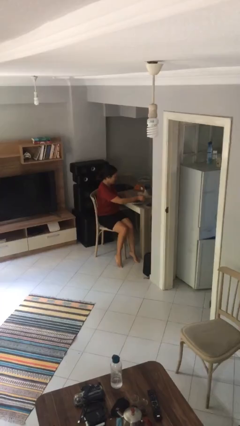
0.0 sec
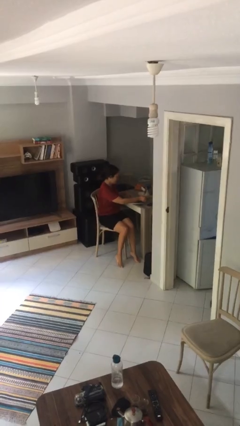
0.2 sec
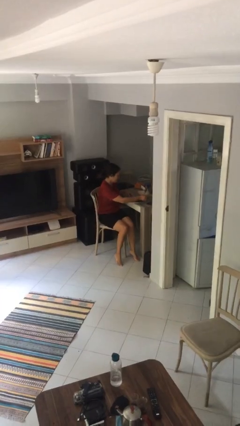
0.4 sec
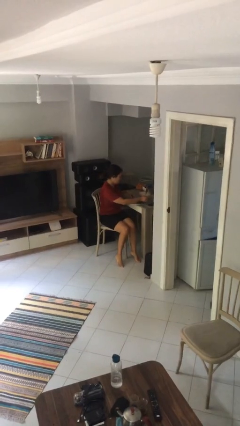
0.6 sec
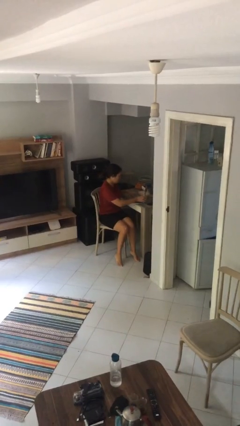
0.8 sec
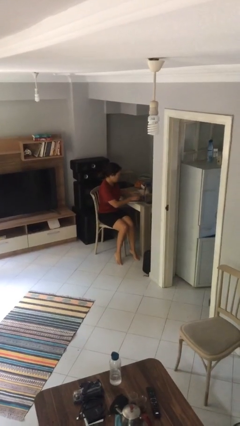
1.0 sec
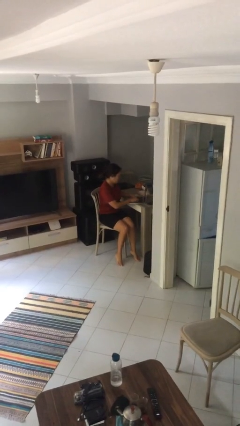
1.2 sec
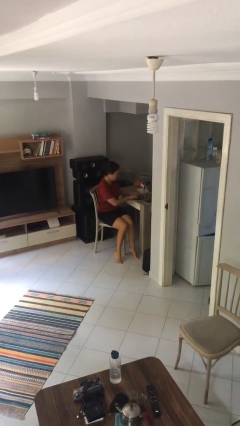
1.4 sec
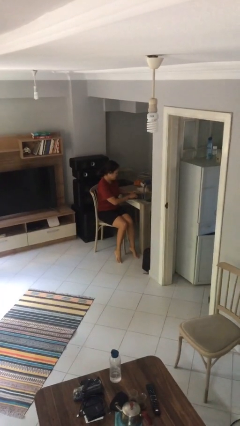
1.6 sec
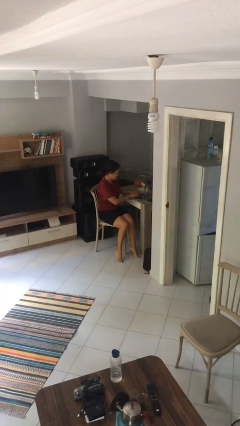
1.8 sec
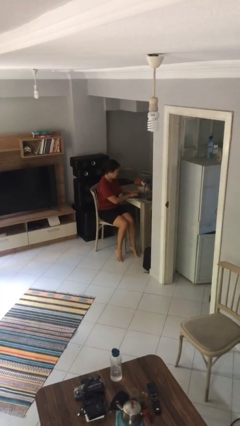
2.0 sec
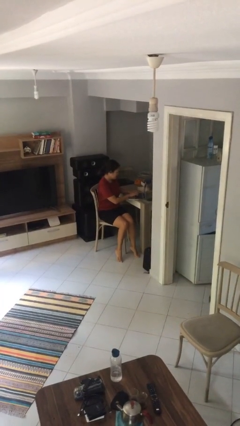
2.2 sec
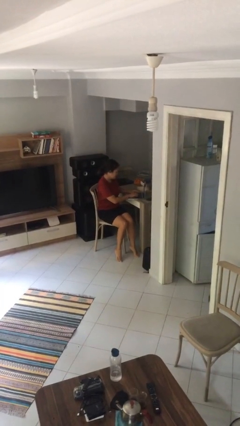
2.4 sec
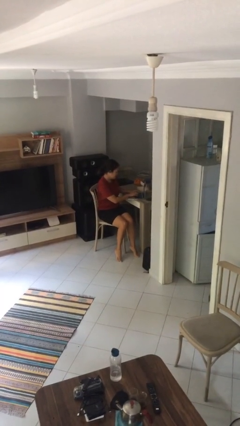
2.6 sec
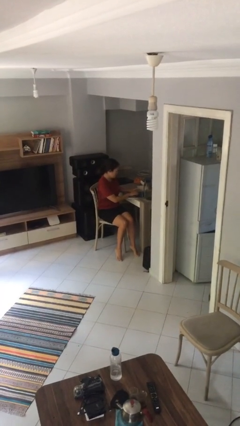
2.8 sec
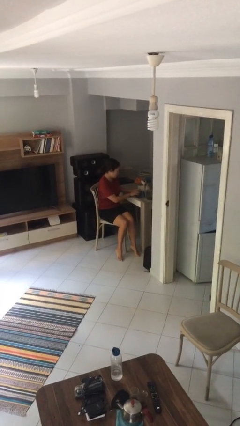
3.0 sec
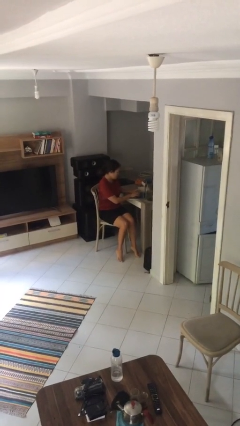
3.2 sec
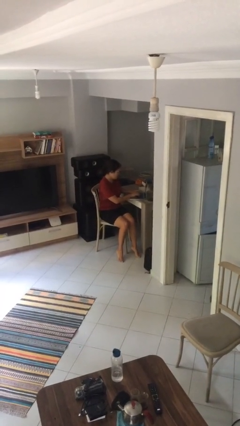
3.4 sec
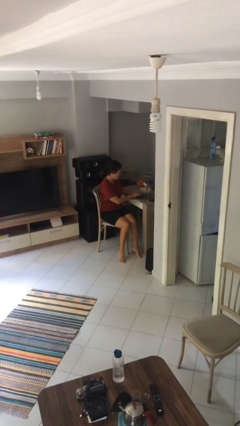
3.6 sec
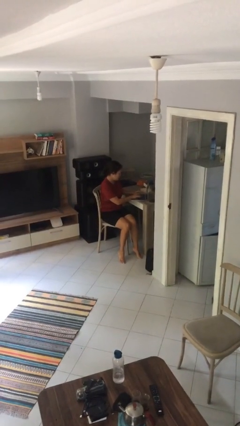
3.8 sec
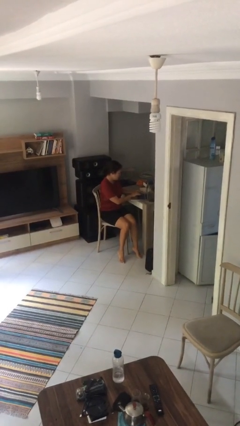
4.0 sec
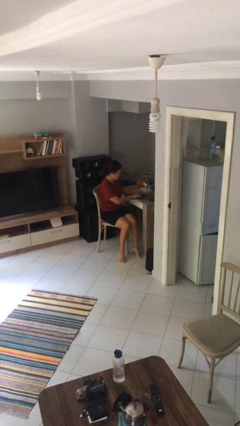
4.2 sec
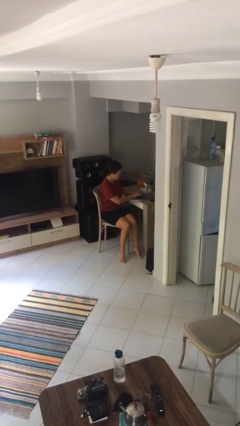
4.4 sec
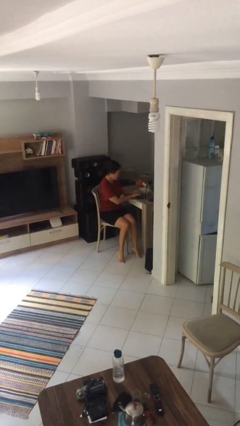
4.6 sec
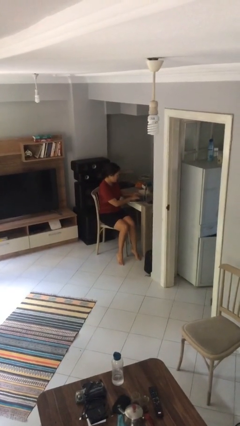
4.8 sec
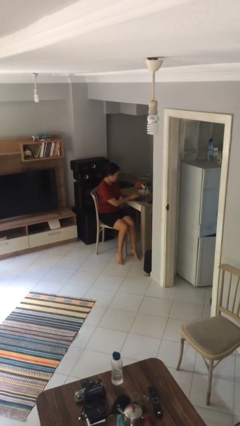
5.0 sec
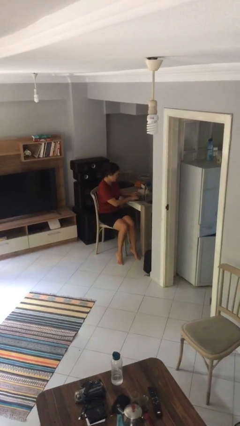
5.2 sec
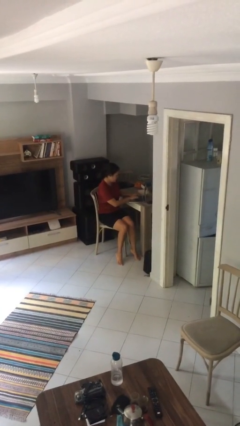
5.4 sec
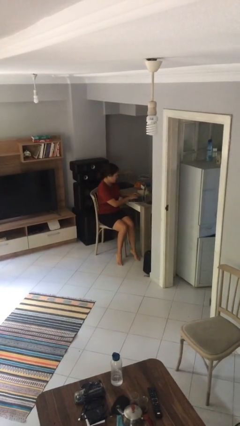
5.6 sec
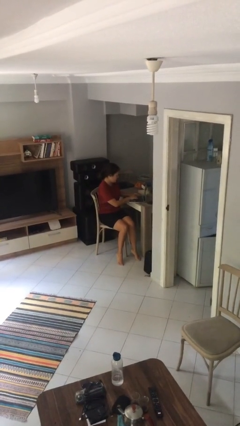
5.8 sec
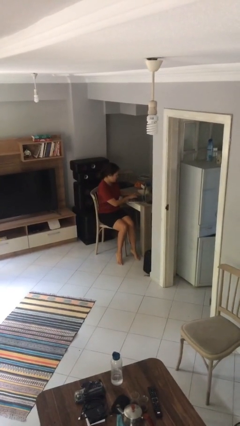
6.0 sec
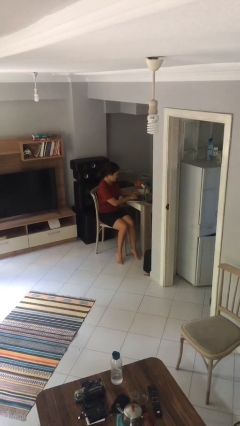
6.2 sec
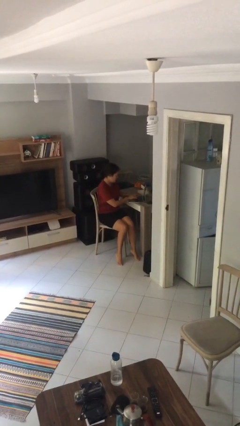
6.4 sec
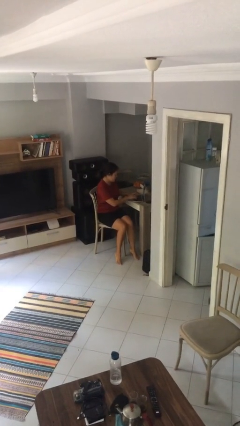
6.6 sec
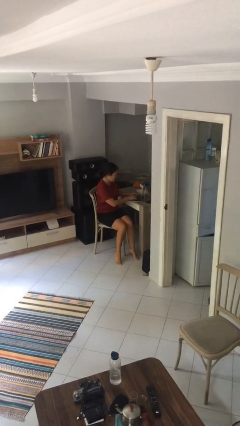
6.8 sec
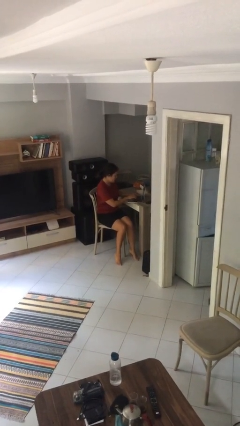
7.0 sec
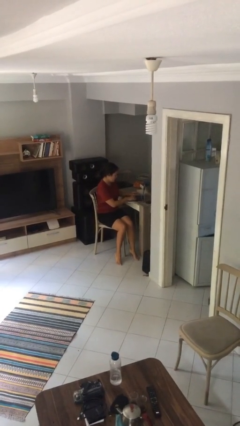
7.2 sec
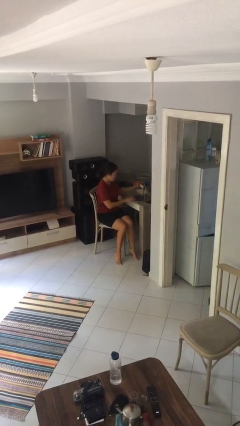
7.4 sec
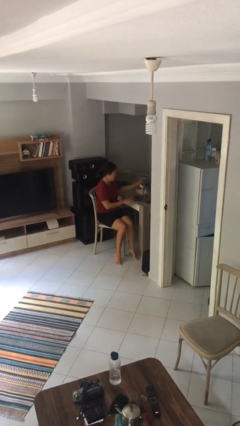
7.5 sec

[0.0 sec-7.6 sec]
person interacts with laptop

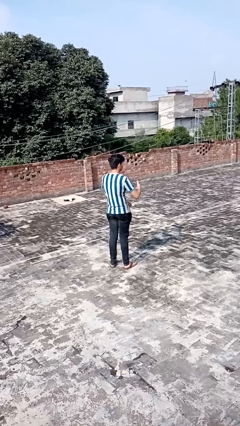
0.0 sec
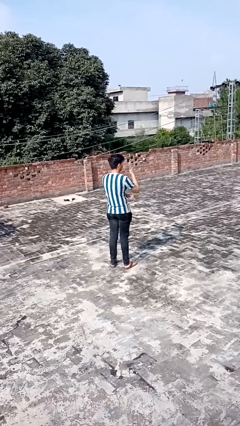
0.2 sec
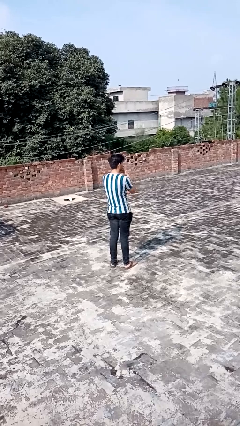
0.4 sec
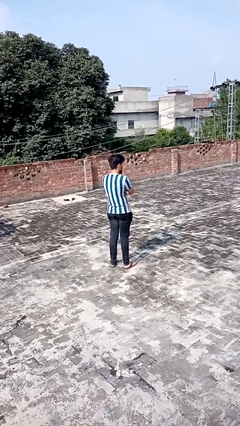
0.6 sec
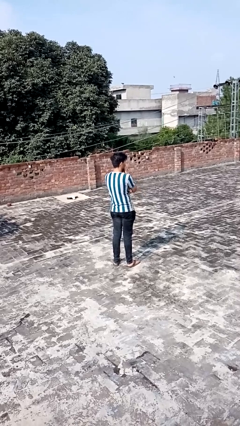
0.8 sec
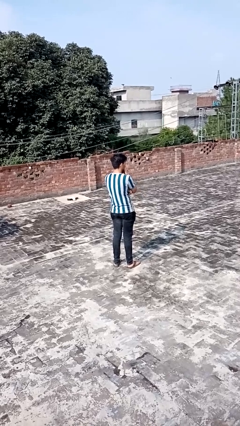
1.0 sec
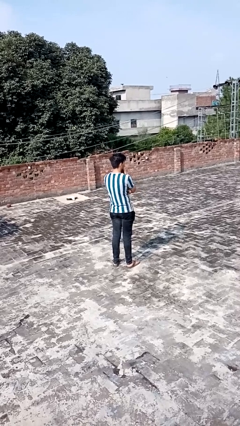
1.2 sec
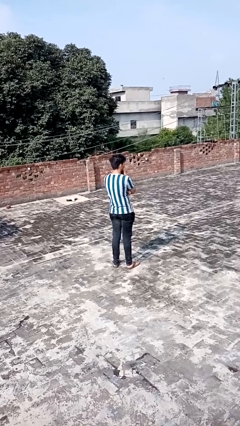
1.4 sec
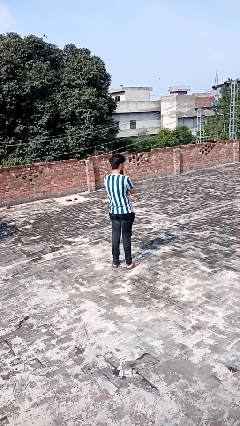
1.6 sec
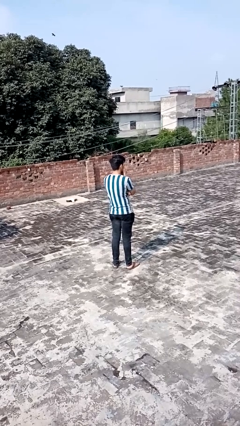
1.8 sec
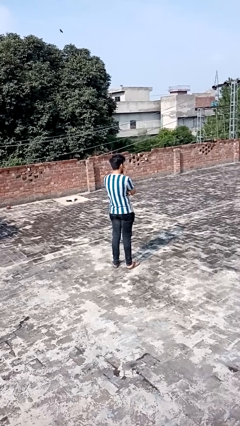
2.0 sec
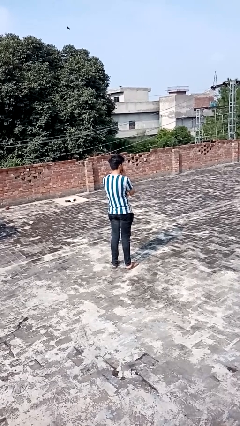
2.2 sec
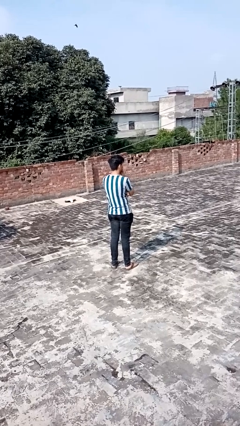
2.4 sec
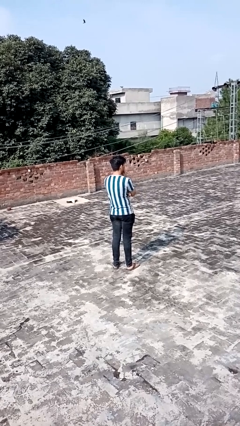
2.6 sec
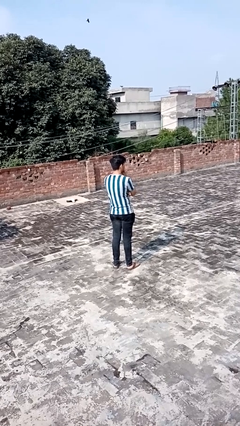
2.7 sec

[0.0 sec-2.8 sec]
person strokes chin

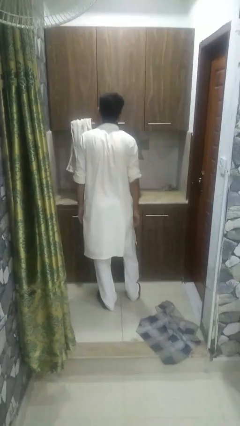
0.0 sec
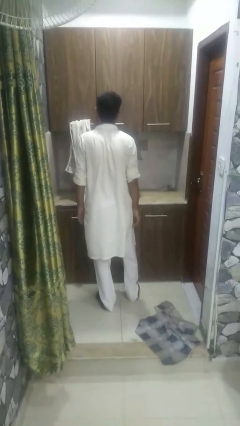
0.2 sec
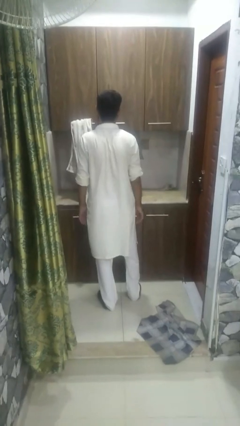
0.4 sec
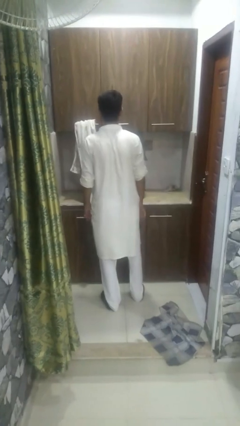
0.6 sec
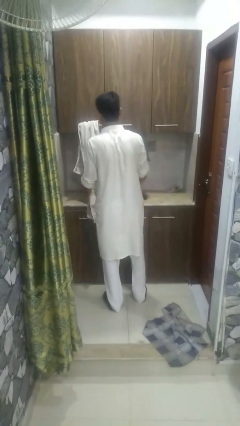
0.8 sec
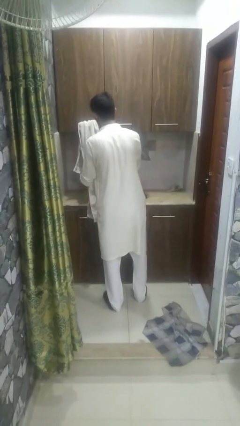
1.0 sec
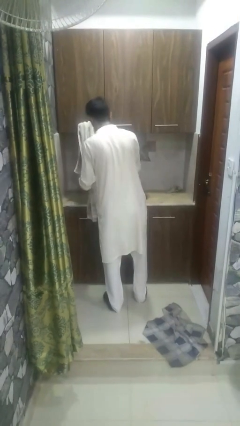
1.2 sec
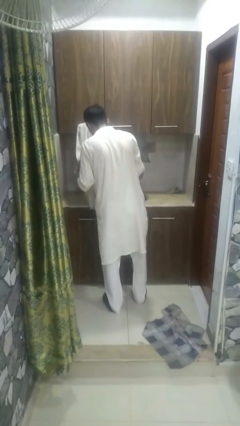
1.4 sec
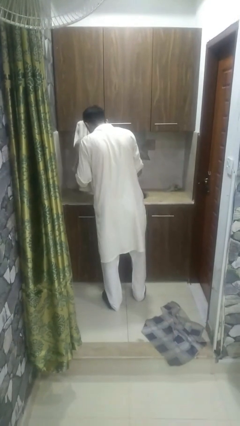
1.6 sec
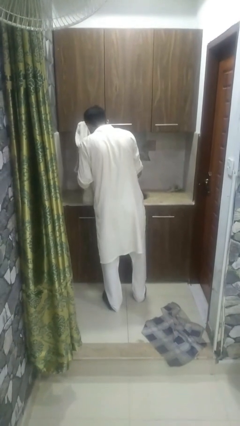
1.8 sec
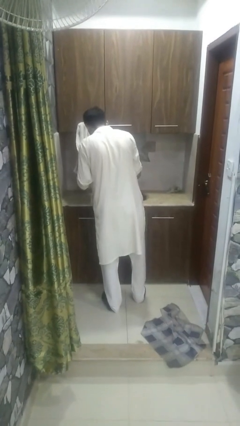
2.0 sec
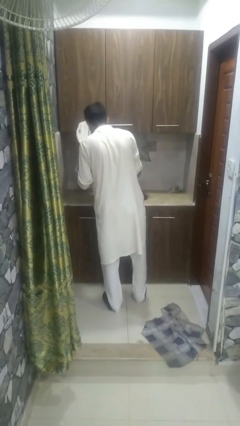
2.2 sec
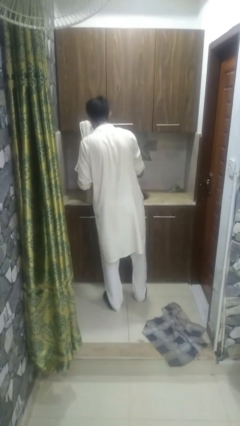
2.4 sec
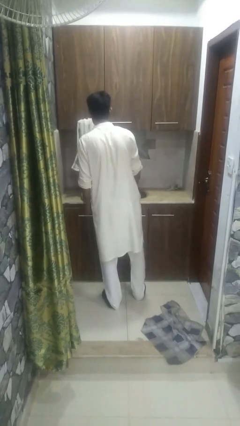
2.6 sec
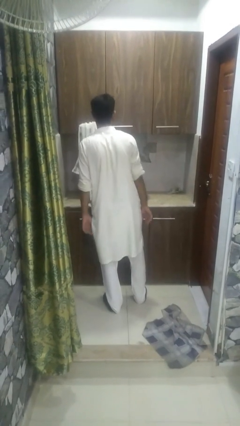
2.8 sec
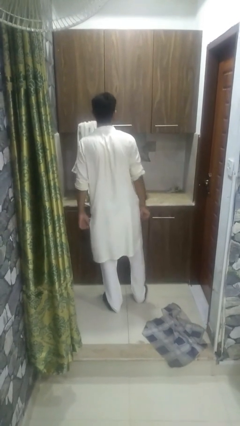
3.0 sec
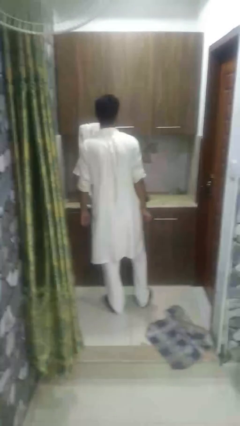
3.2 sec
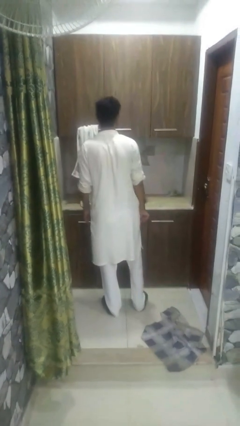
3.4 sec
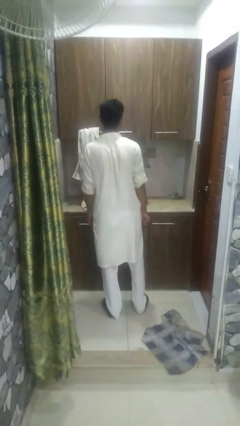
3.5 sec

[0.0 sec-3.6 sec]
person dries face with towel

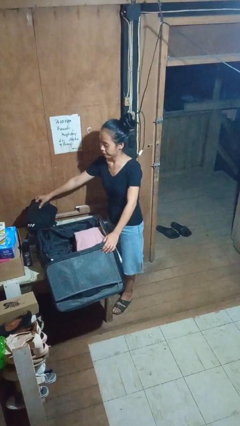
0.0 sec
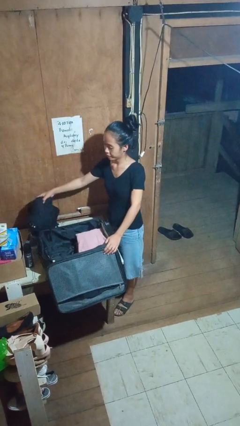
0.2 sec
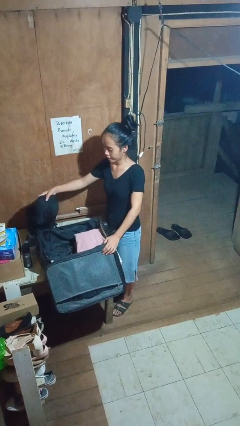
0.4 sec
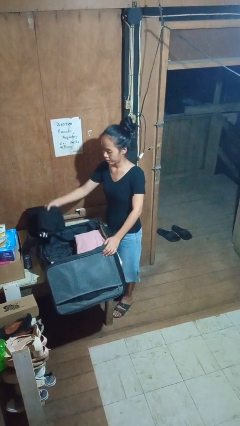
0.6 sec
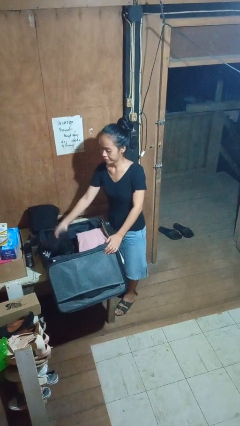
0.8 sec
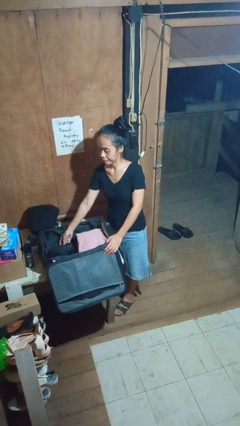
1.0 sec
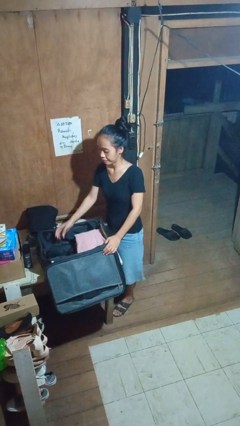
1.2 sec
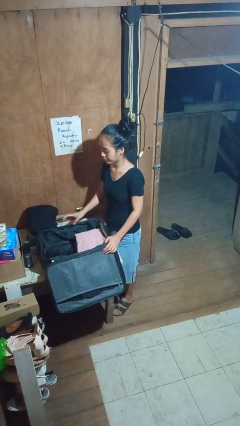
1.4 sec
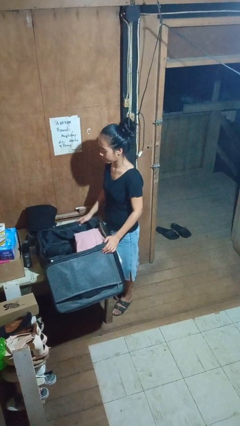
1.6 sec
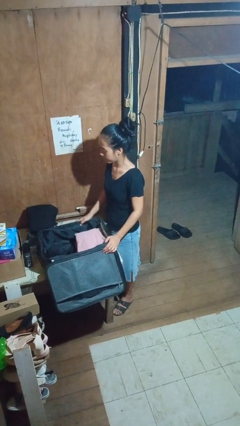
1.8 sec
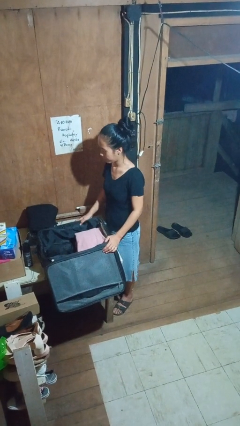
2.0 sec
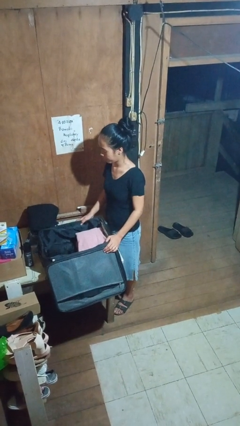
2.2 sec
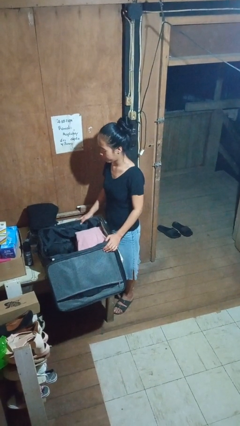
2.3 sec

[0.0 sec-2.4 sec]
person loads clothes into suitcase

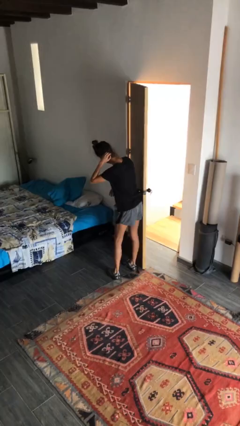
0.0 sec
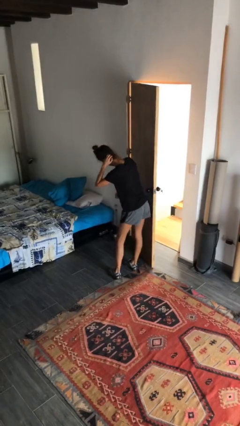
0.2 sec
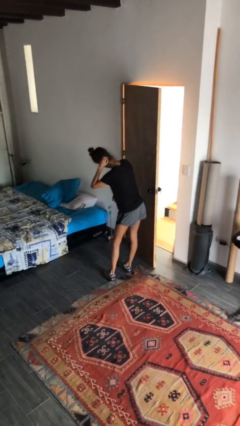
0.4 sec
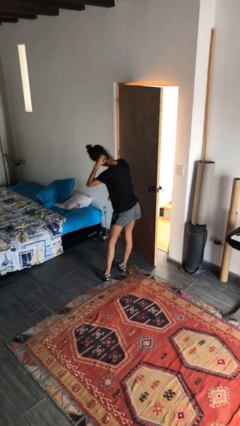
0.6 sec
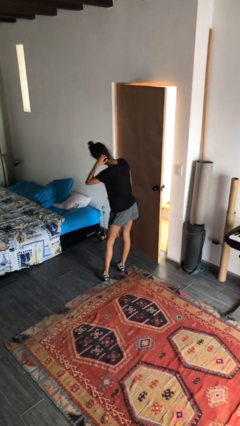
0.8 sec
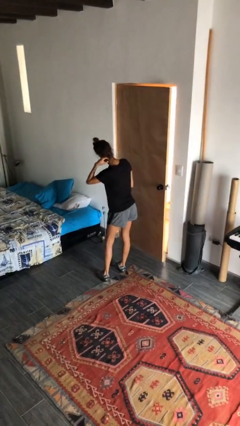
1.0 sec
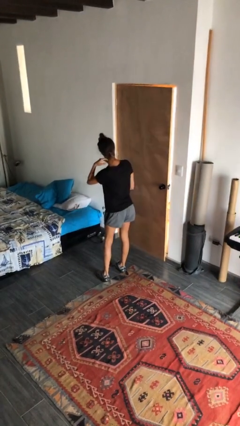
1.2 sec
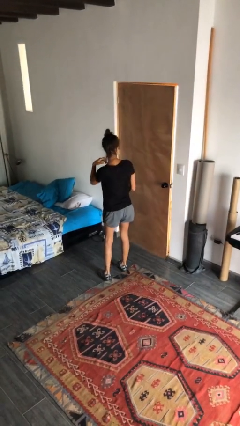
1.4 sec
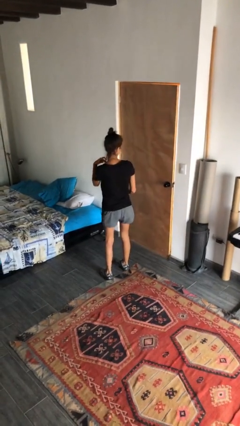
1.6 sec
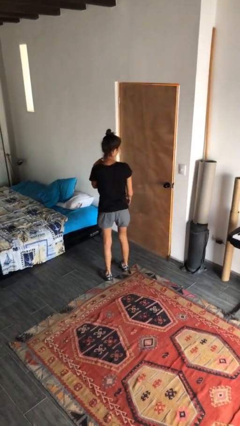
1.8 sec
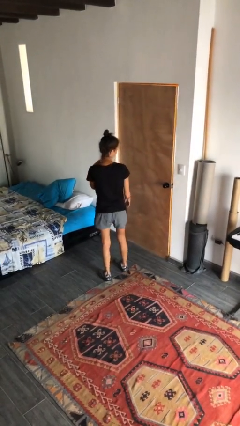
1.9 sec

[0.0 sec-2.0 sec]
person closes door with hip
